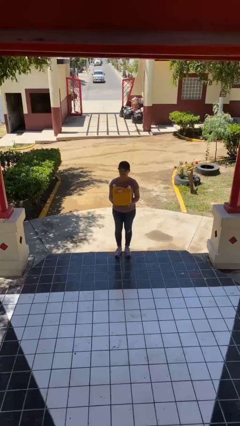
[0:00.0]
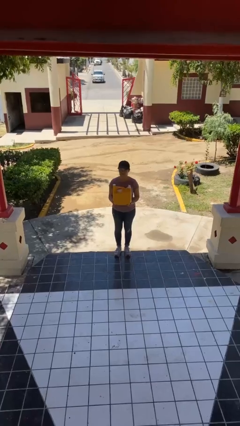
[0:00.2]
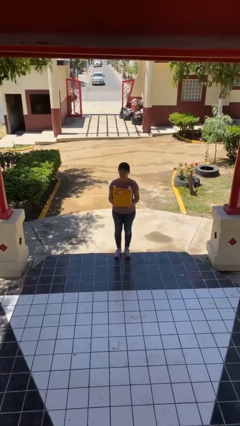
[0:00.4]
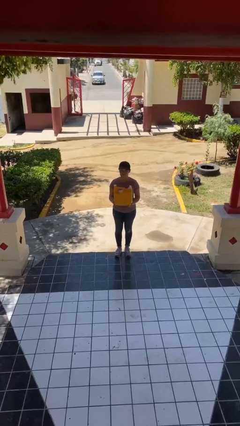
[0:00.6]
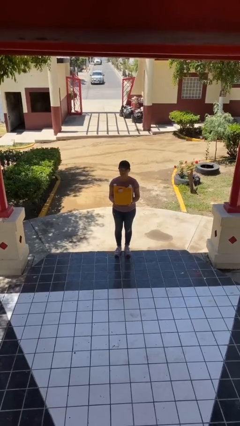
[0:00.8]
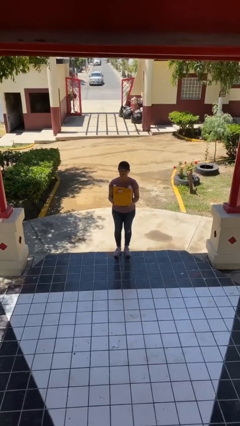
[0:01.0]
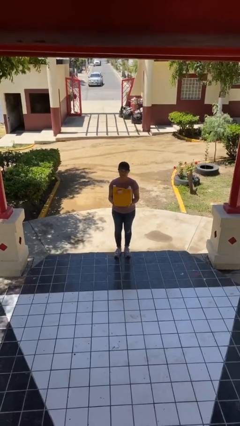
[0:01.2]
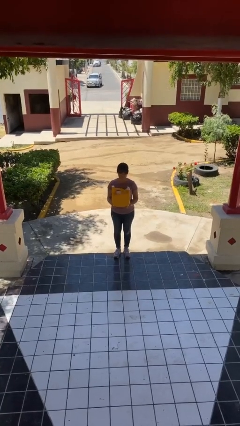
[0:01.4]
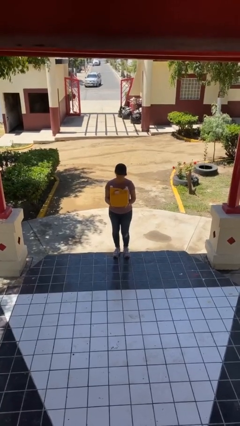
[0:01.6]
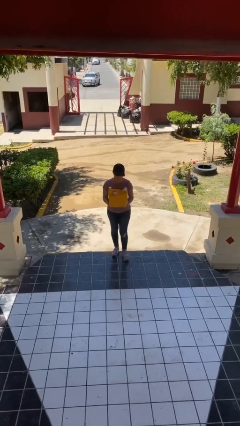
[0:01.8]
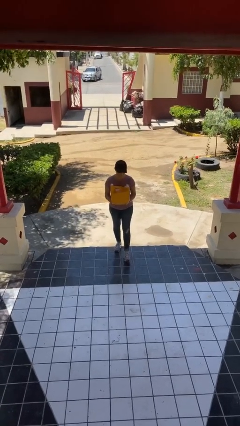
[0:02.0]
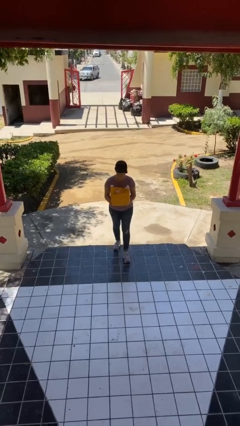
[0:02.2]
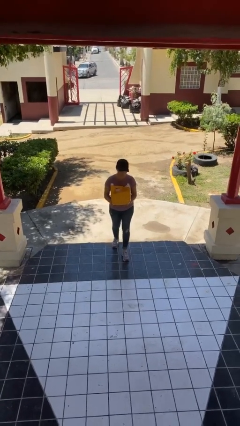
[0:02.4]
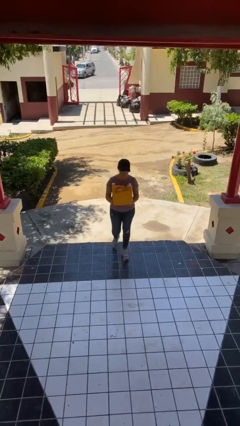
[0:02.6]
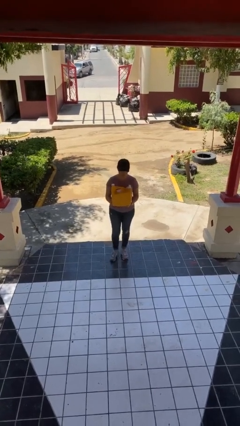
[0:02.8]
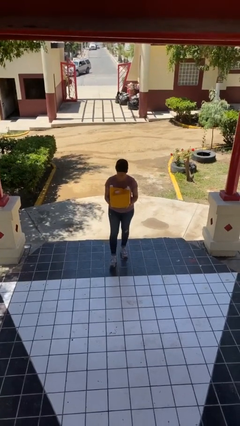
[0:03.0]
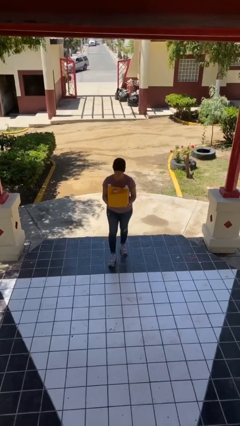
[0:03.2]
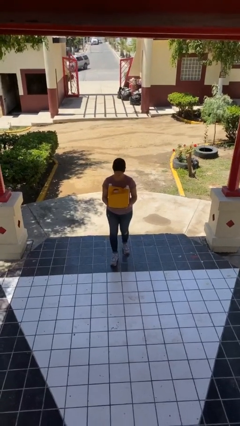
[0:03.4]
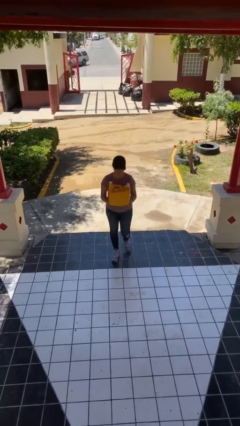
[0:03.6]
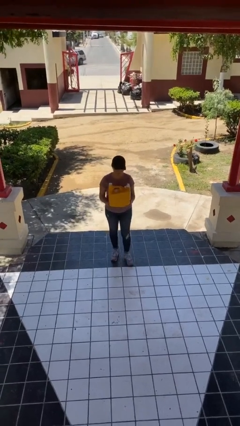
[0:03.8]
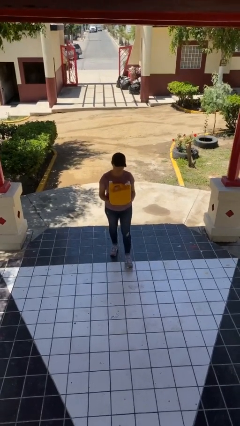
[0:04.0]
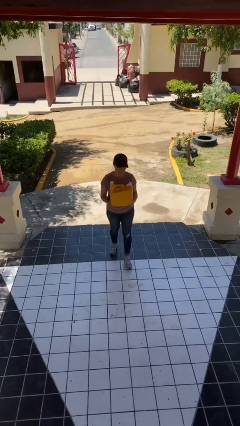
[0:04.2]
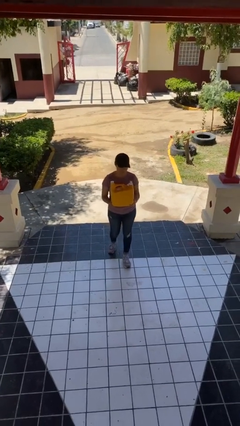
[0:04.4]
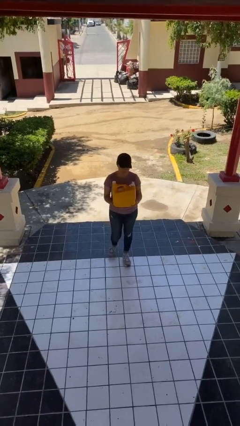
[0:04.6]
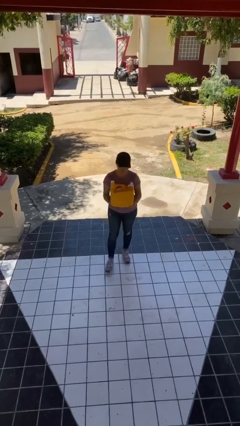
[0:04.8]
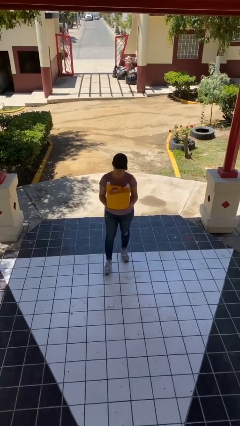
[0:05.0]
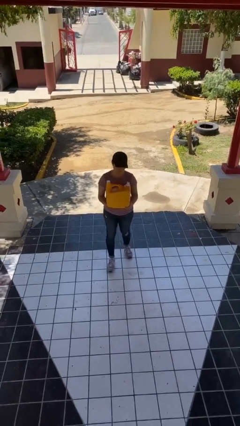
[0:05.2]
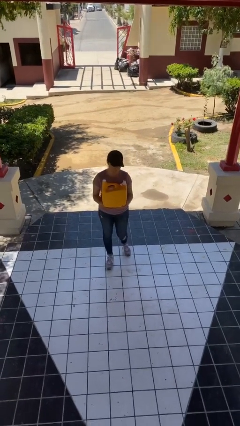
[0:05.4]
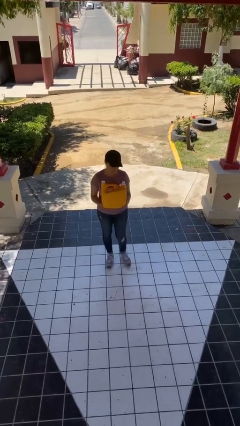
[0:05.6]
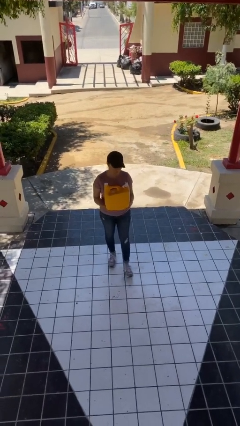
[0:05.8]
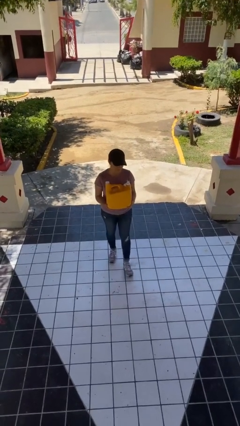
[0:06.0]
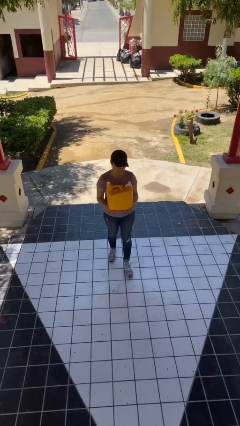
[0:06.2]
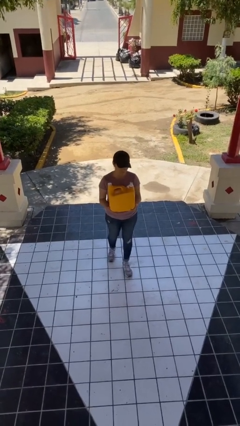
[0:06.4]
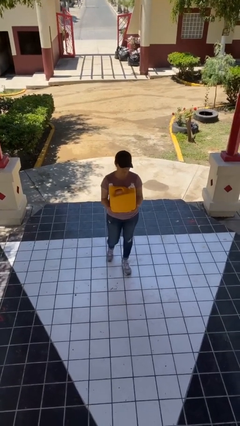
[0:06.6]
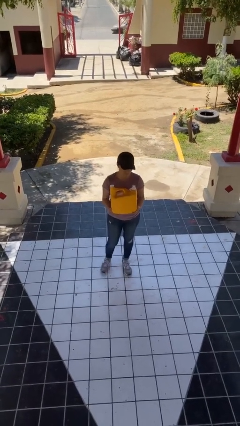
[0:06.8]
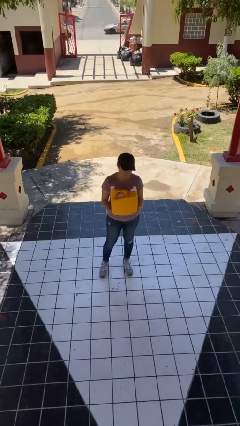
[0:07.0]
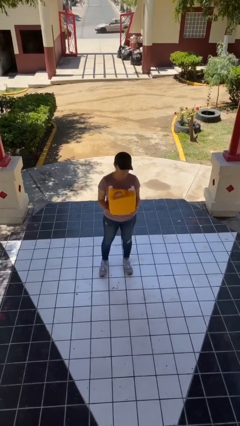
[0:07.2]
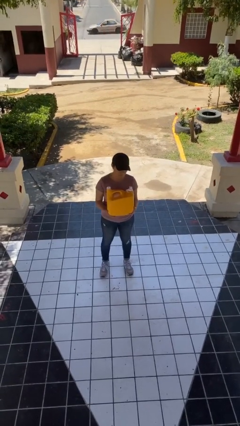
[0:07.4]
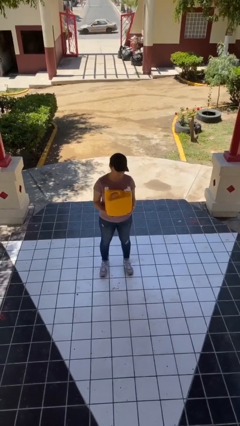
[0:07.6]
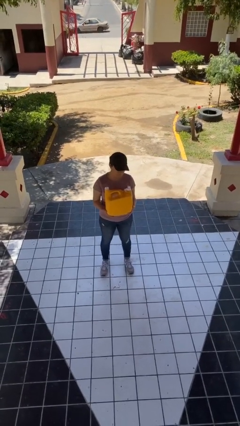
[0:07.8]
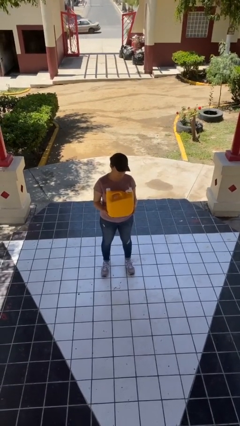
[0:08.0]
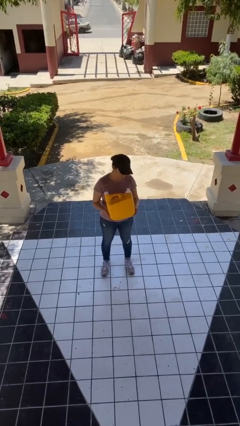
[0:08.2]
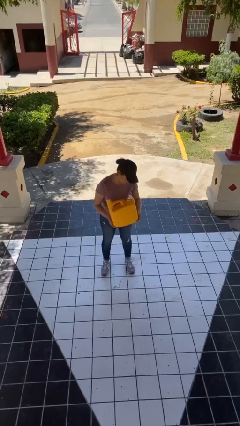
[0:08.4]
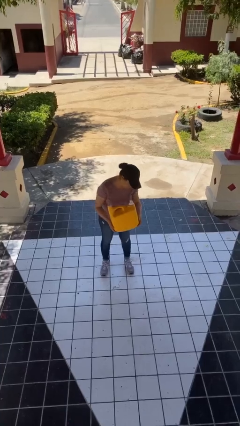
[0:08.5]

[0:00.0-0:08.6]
person carries heavy object

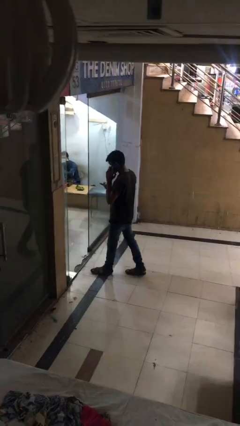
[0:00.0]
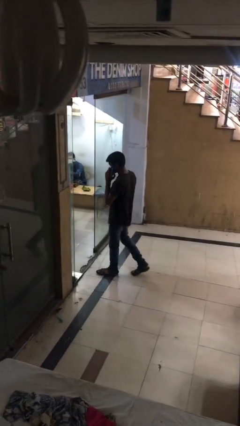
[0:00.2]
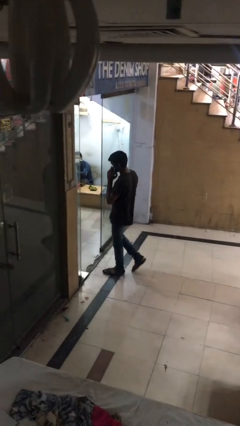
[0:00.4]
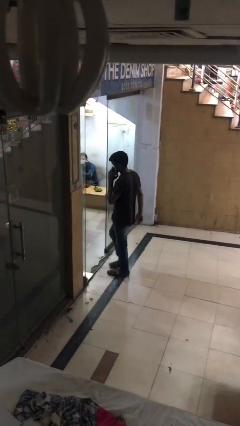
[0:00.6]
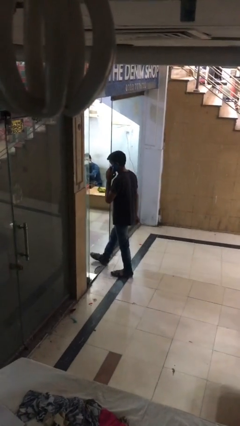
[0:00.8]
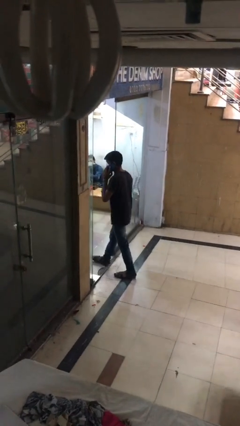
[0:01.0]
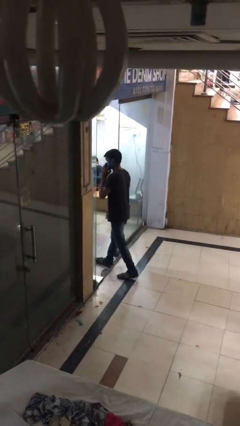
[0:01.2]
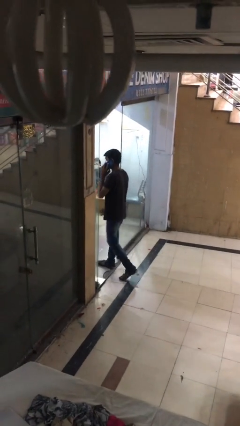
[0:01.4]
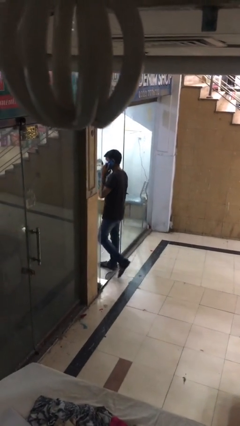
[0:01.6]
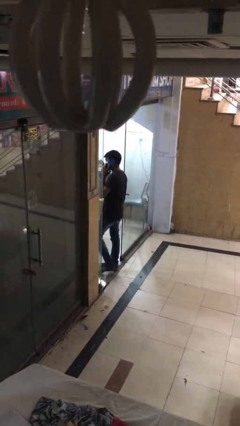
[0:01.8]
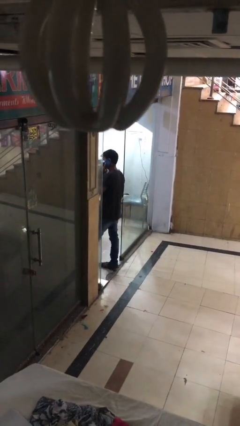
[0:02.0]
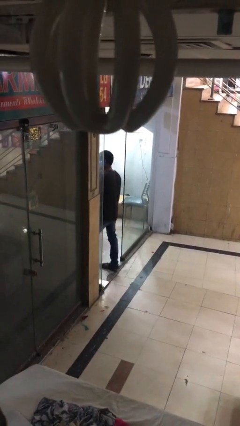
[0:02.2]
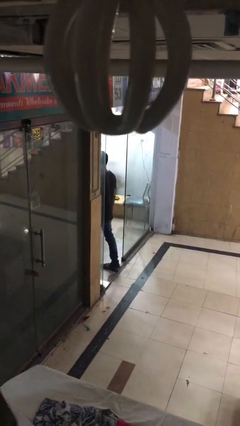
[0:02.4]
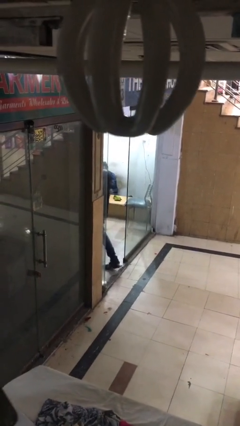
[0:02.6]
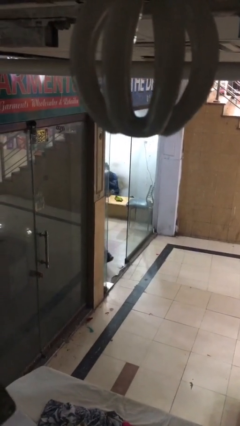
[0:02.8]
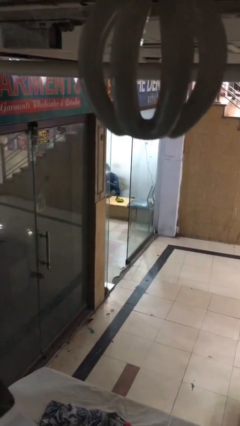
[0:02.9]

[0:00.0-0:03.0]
person exits scene through structure

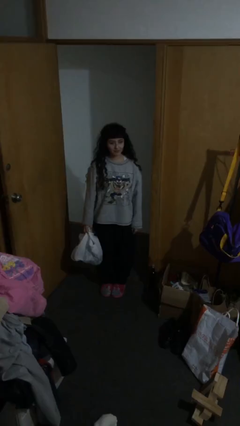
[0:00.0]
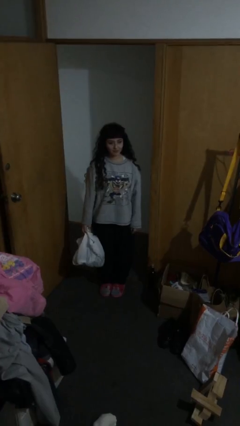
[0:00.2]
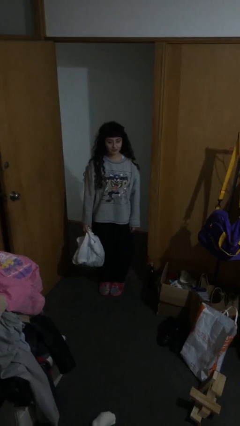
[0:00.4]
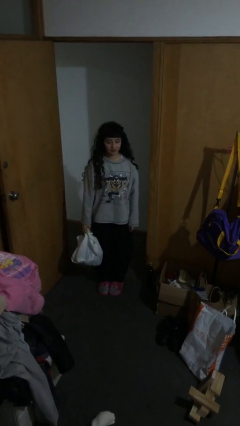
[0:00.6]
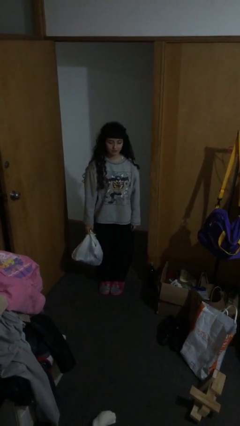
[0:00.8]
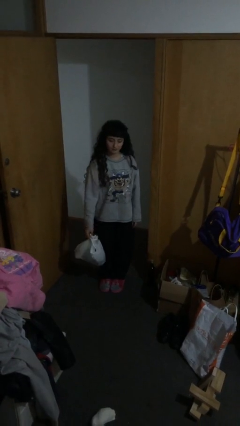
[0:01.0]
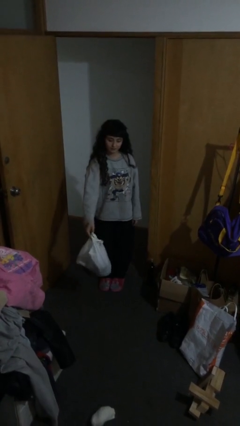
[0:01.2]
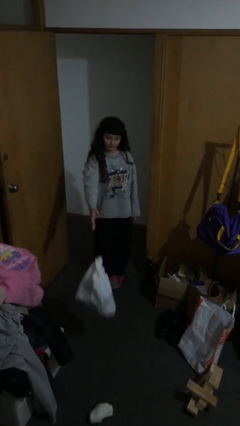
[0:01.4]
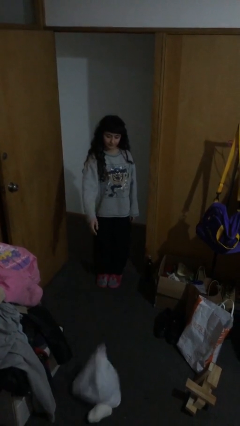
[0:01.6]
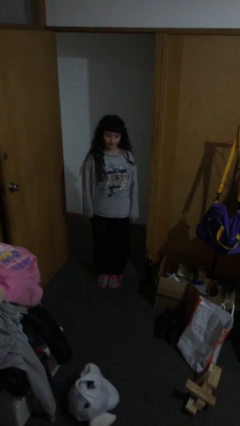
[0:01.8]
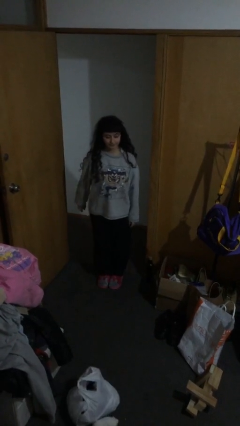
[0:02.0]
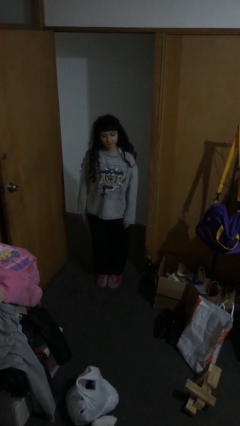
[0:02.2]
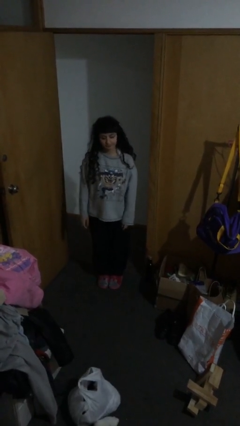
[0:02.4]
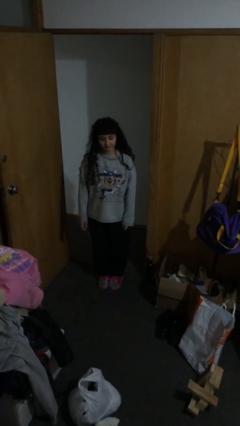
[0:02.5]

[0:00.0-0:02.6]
person throws object to ground

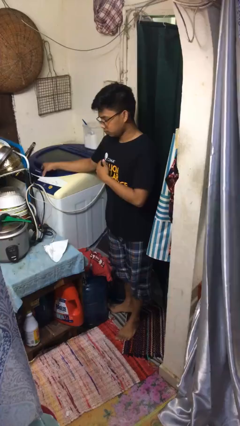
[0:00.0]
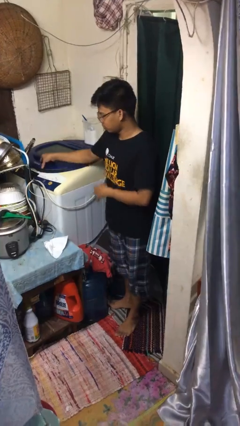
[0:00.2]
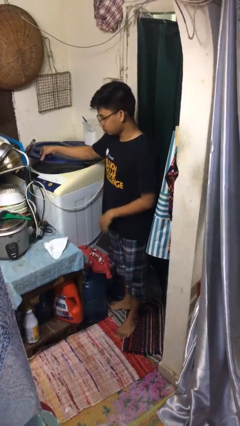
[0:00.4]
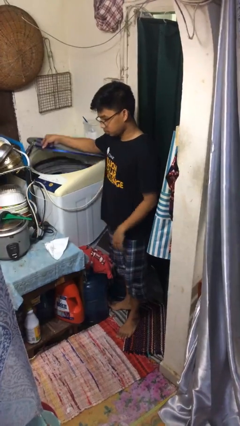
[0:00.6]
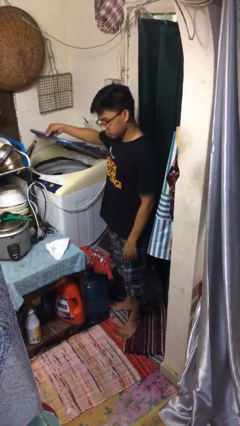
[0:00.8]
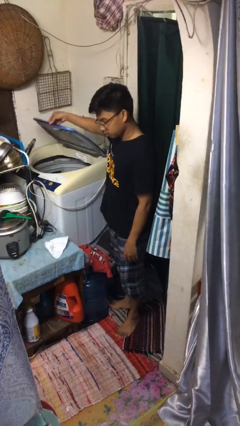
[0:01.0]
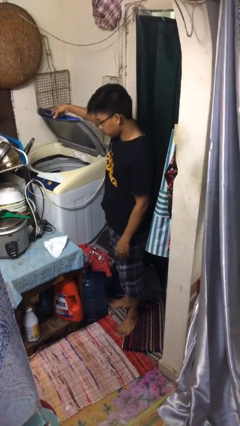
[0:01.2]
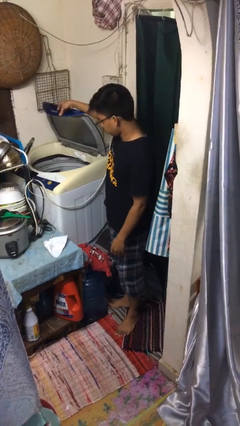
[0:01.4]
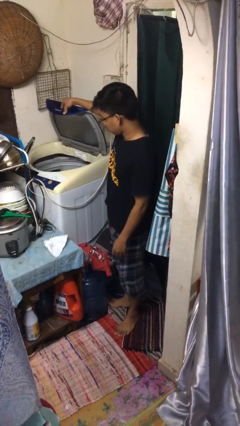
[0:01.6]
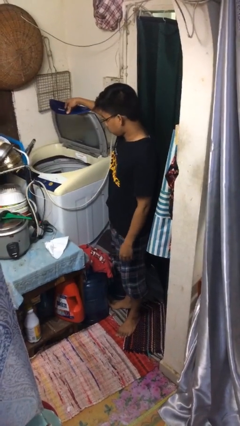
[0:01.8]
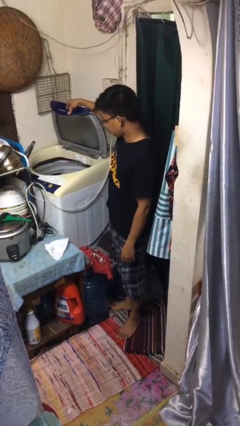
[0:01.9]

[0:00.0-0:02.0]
person opens clothes washer

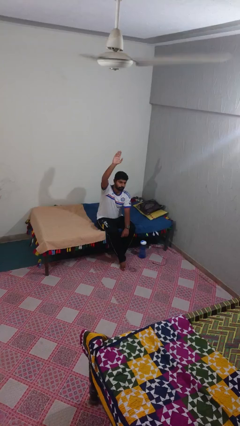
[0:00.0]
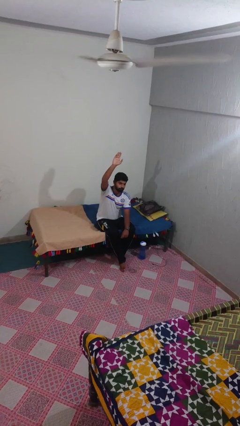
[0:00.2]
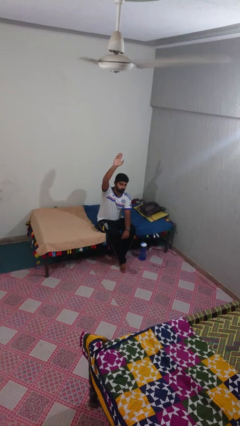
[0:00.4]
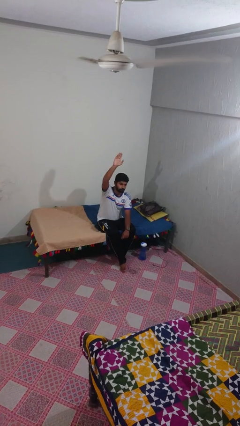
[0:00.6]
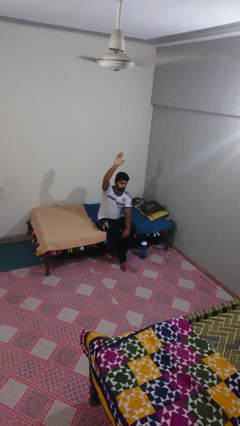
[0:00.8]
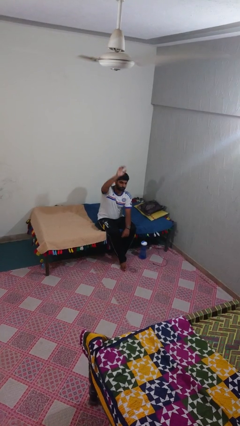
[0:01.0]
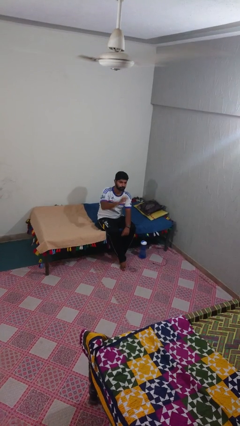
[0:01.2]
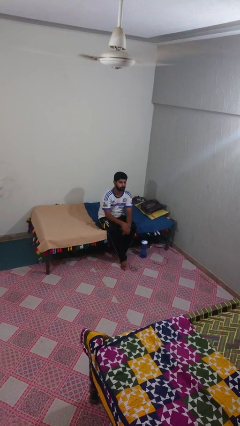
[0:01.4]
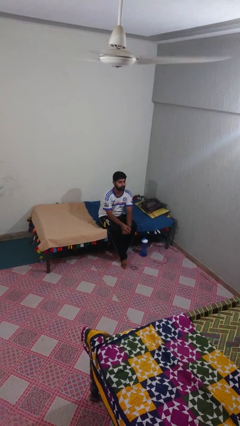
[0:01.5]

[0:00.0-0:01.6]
person gestures lower hand
